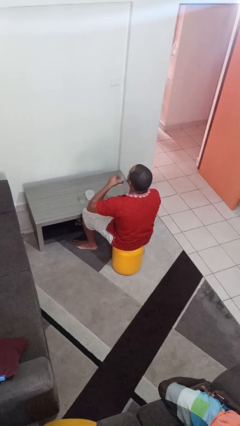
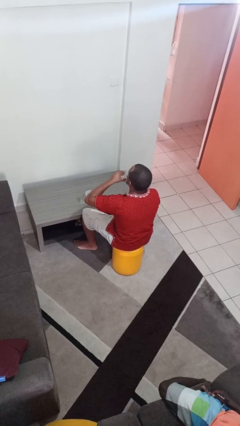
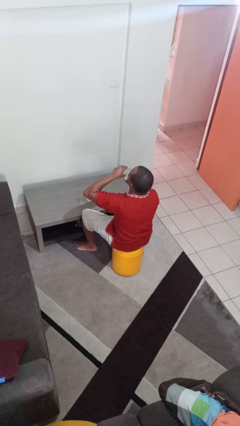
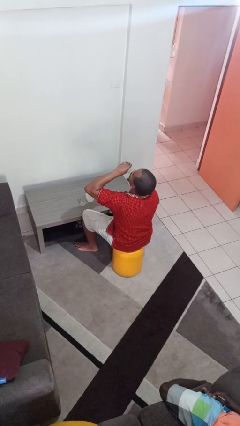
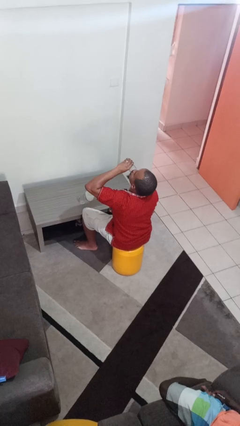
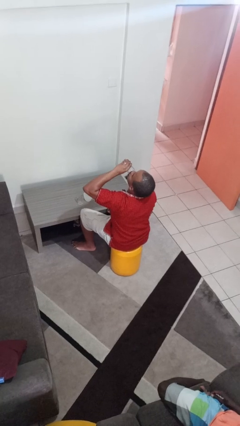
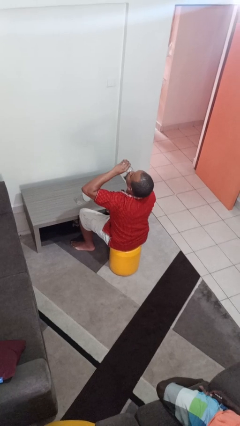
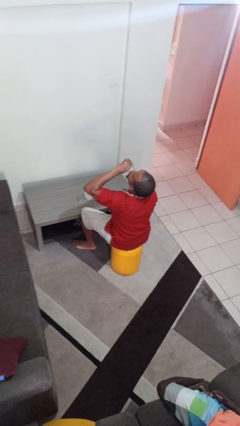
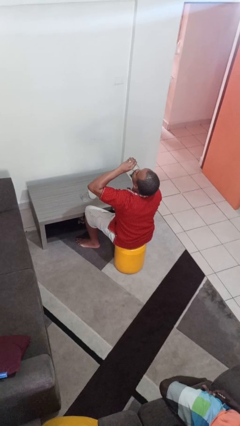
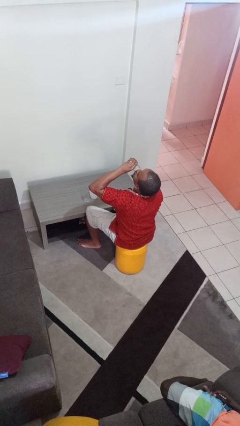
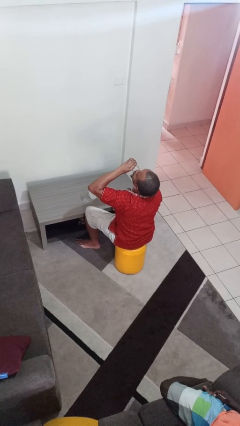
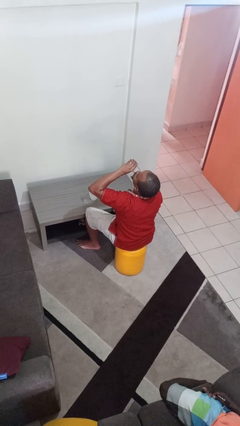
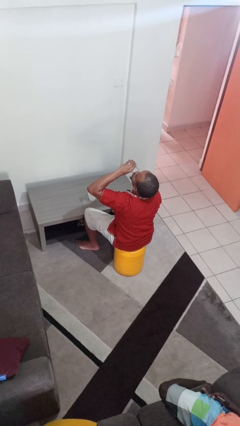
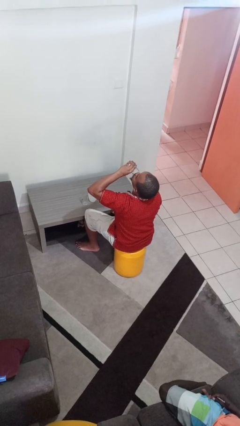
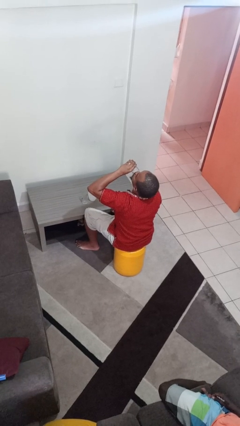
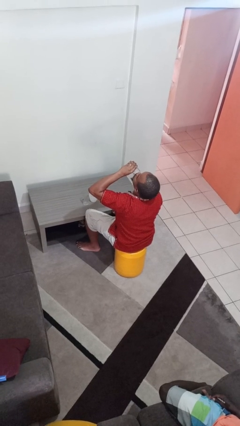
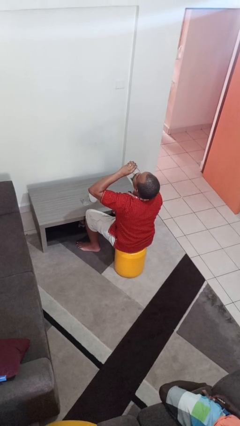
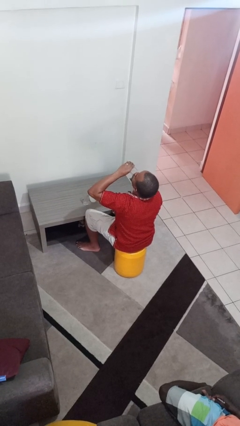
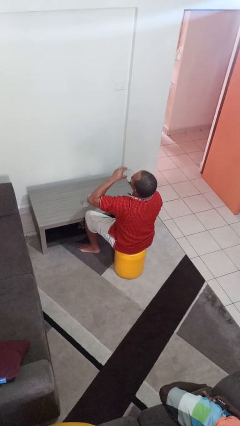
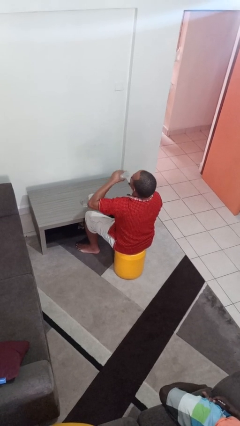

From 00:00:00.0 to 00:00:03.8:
person drinks from shotglass

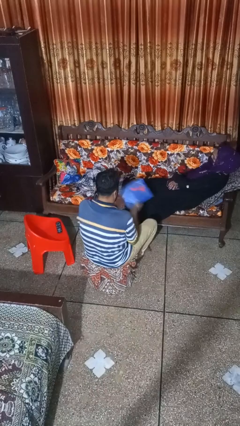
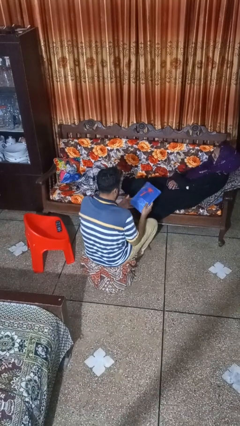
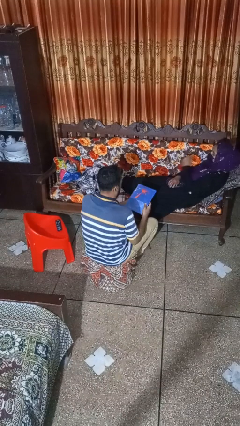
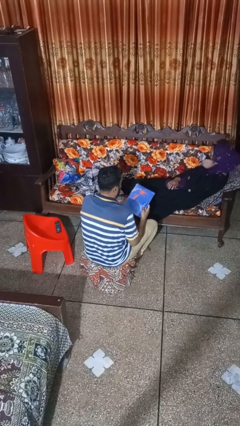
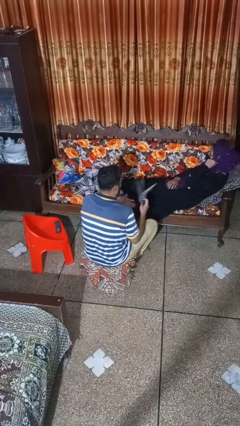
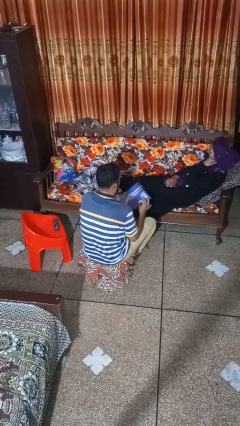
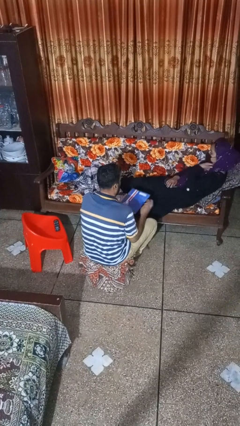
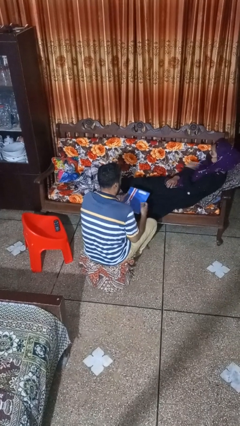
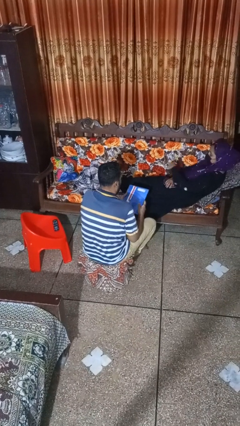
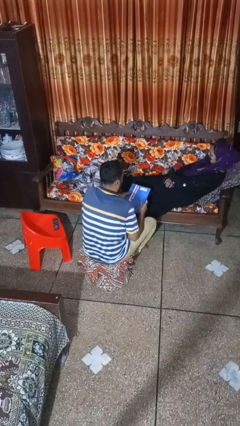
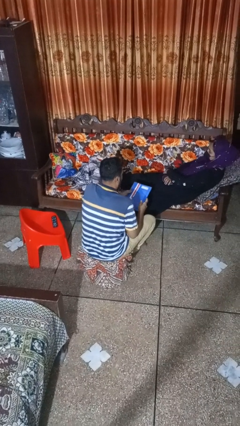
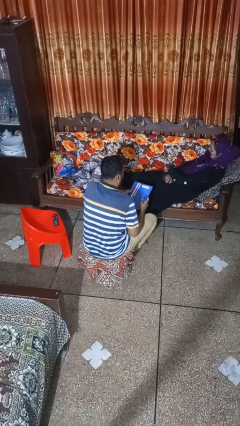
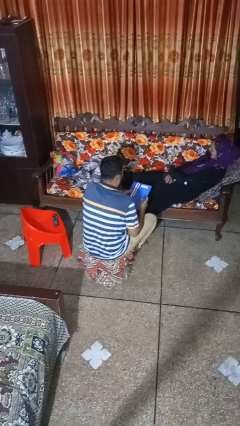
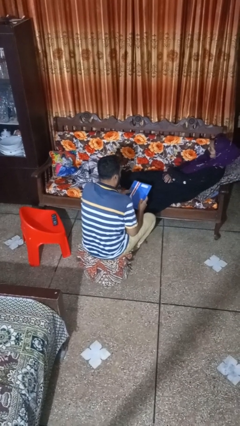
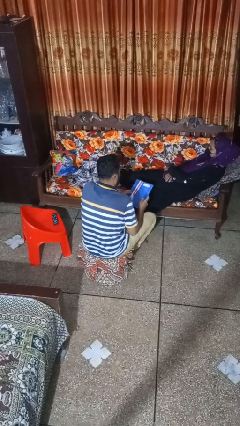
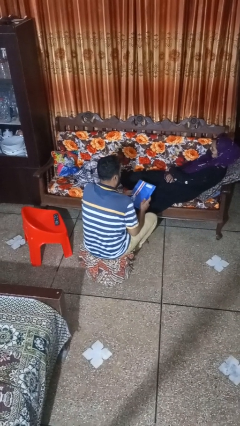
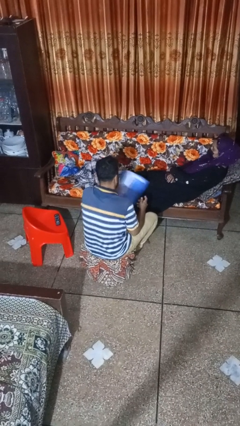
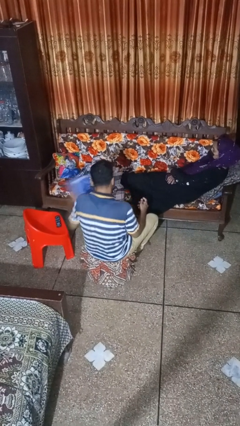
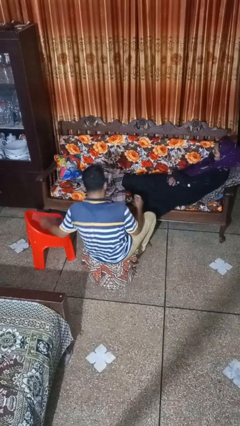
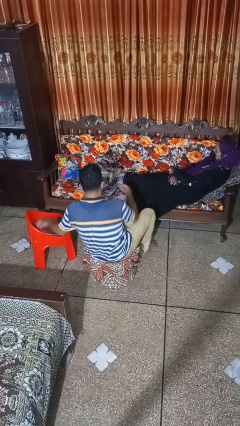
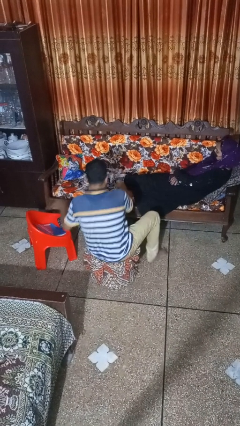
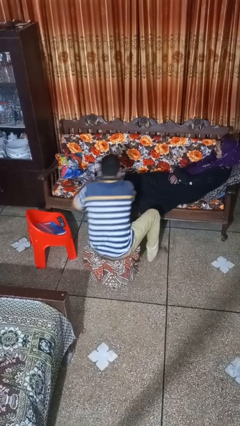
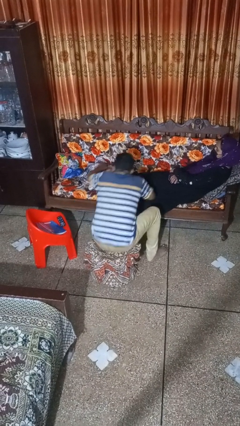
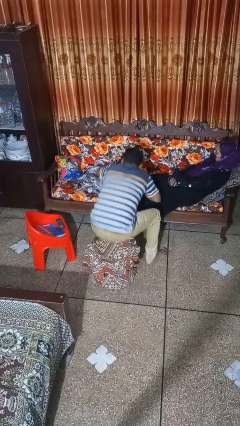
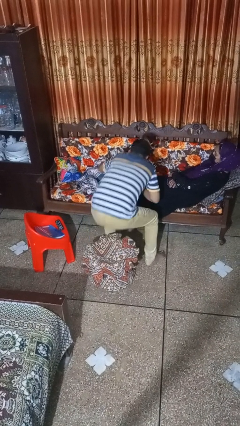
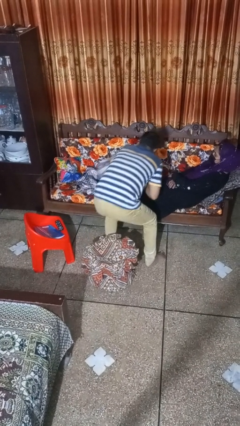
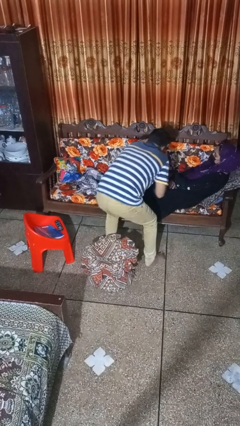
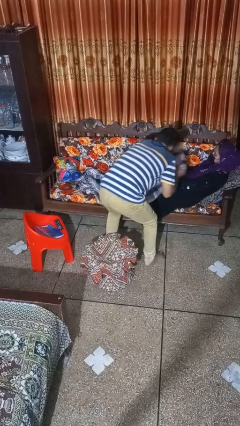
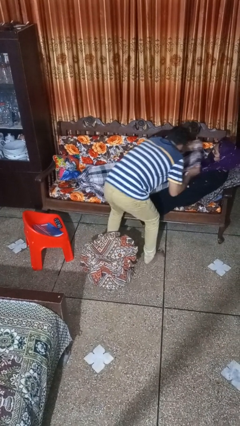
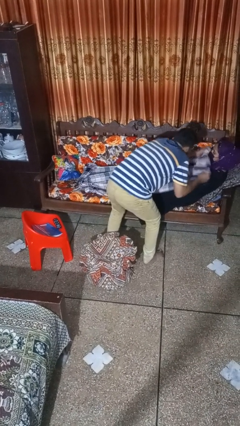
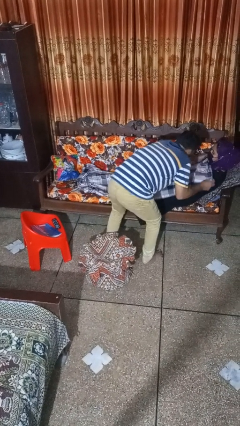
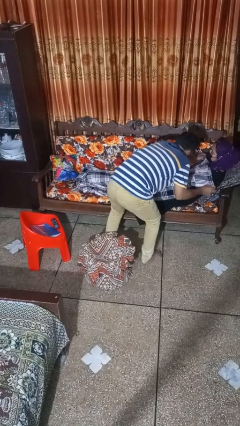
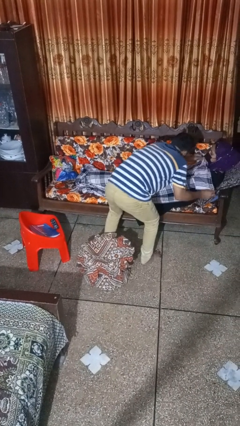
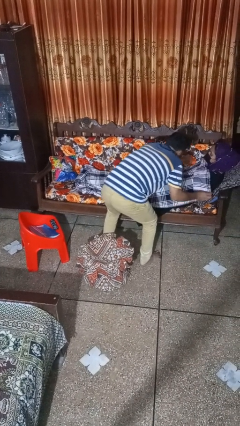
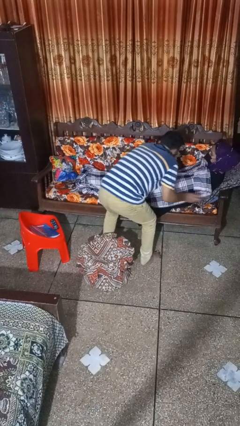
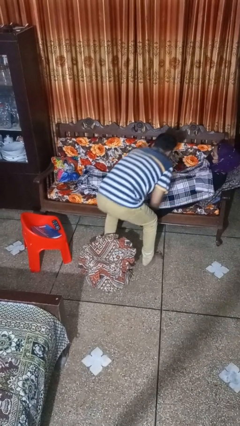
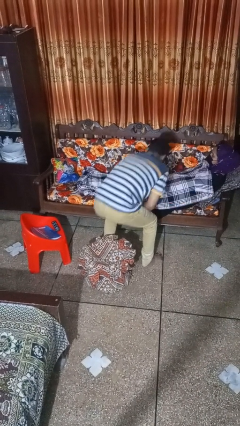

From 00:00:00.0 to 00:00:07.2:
person covers friend with blanket

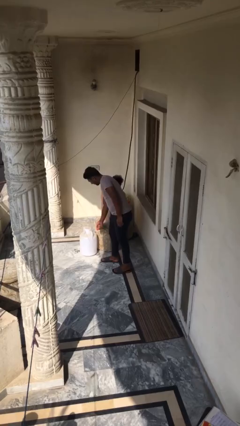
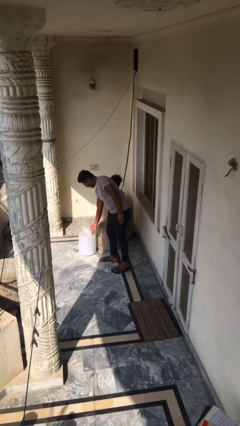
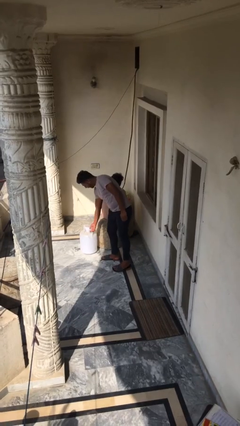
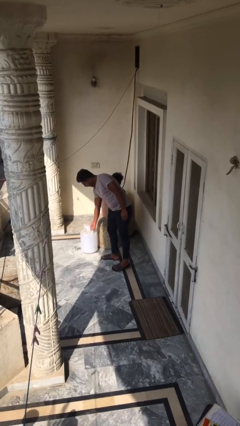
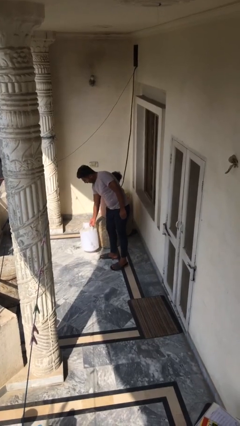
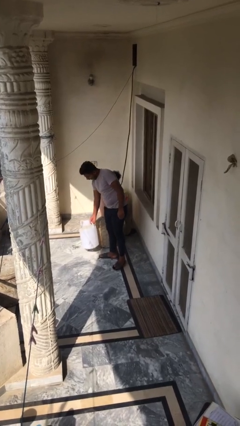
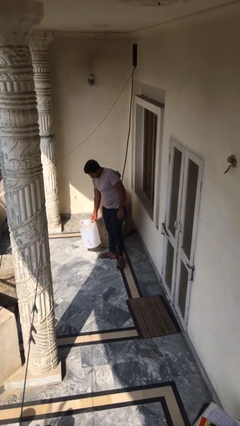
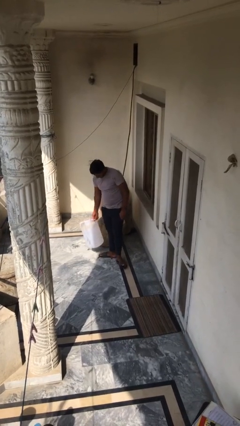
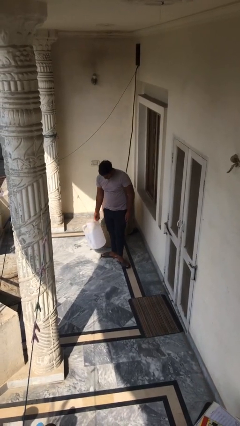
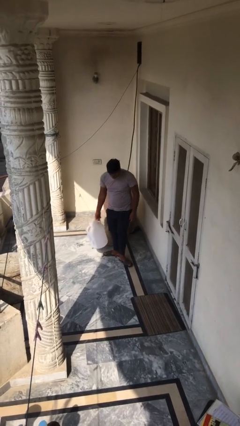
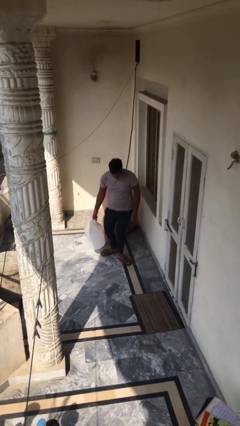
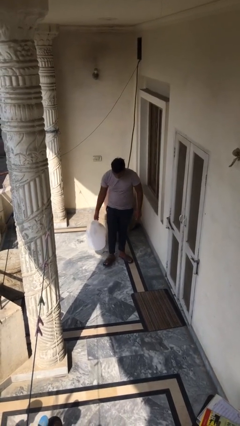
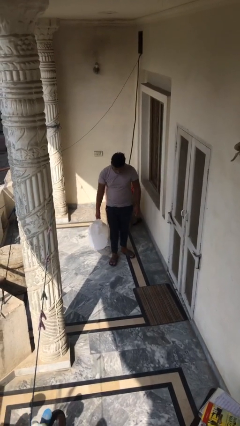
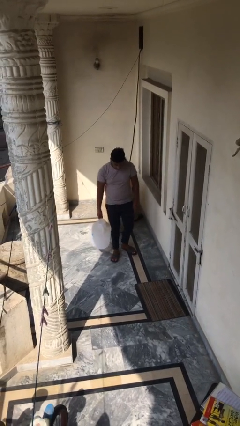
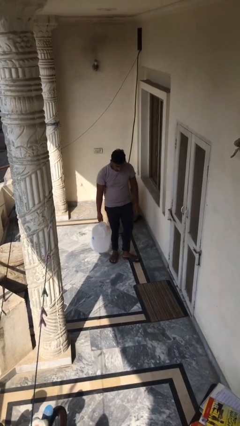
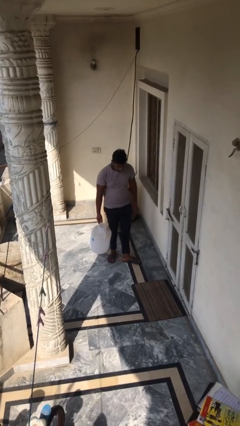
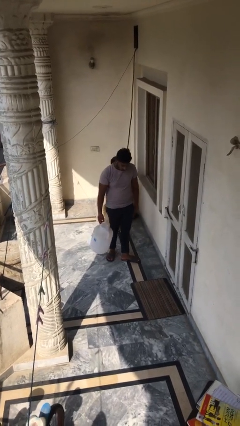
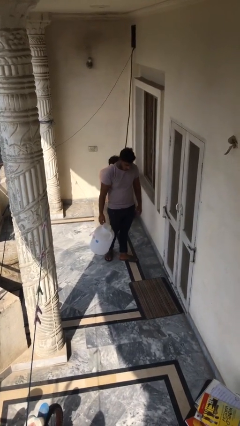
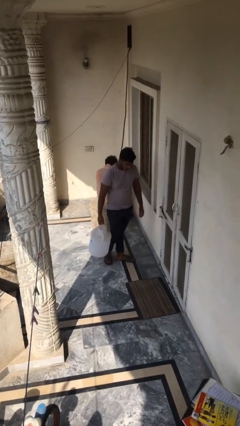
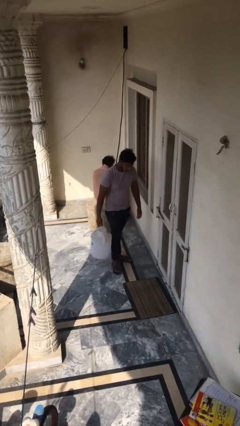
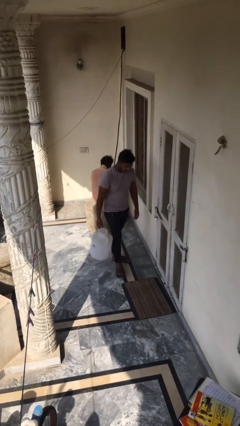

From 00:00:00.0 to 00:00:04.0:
person steals object from person

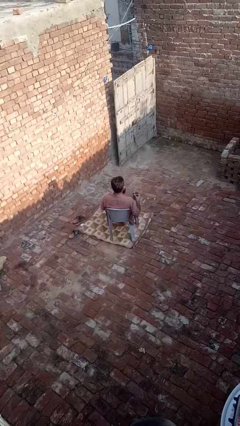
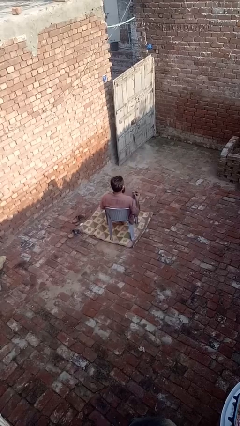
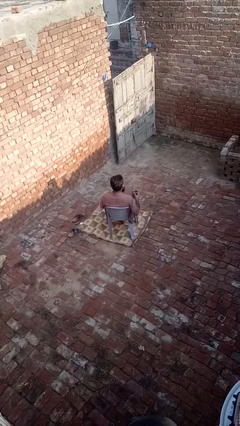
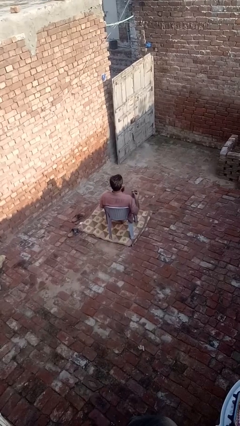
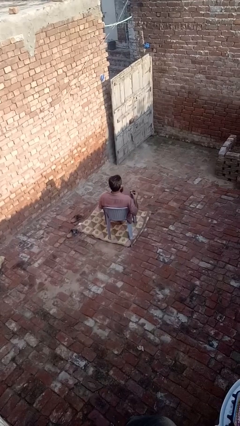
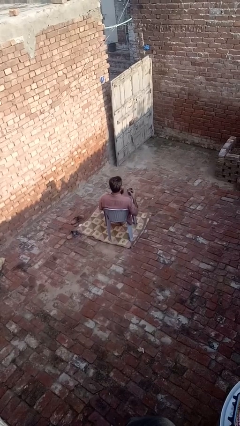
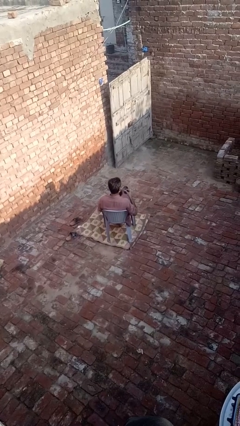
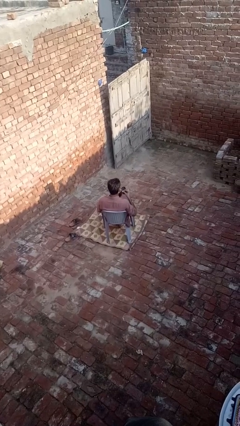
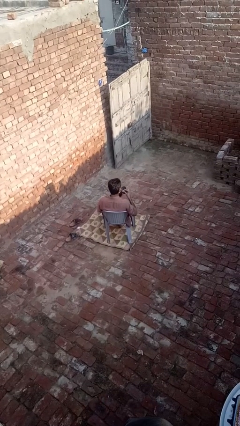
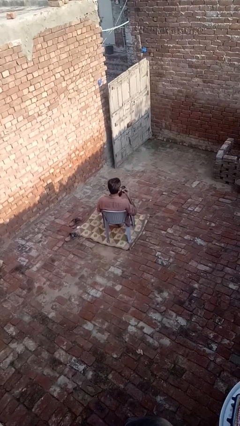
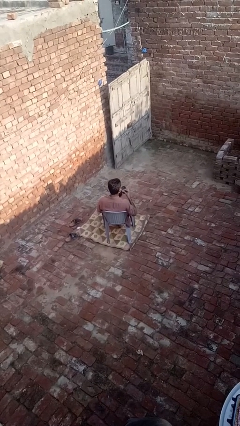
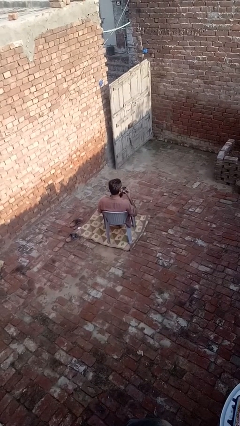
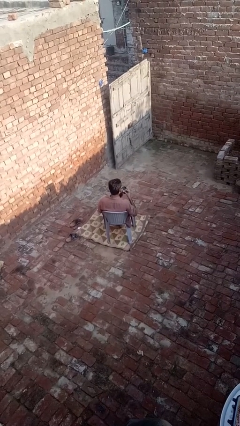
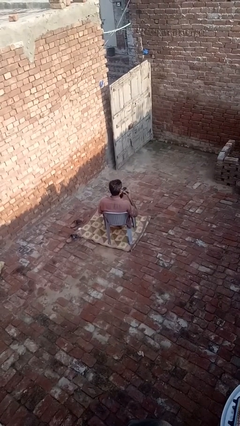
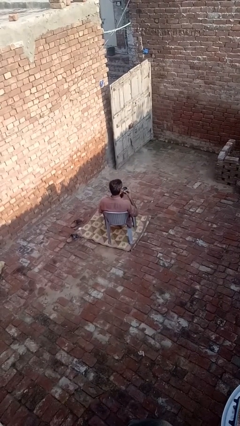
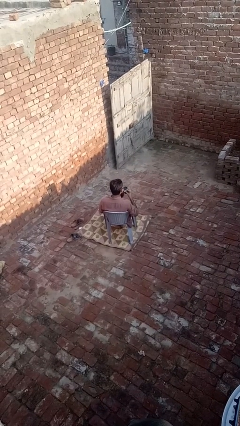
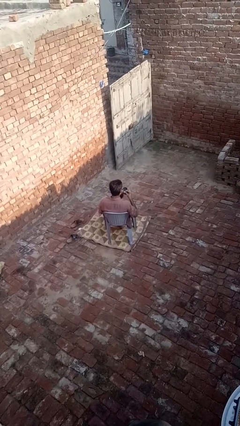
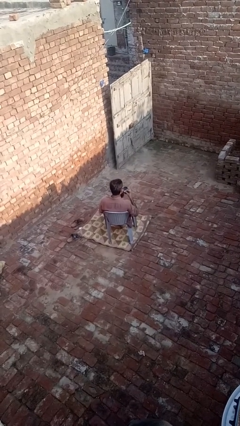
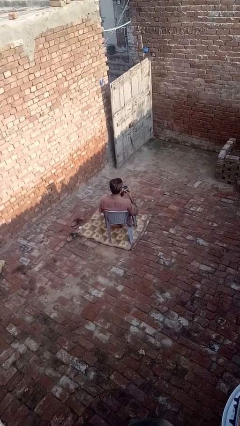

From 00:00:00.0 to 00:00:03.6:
person drinks from straw
